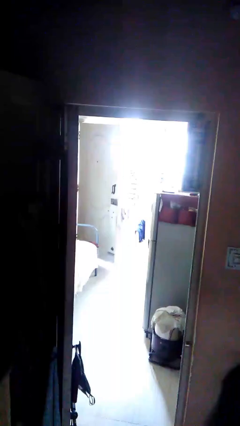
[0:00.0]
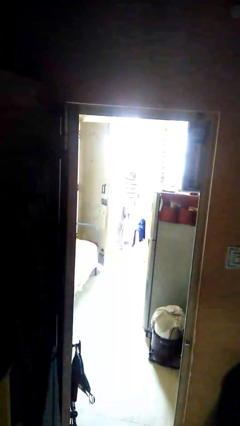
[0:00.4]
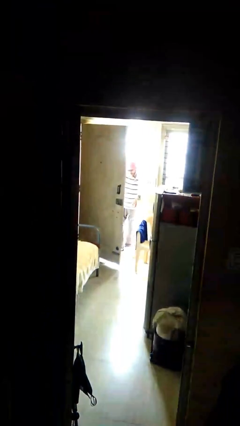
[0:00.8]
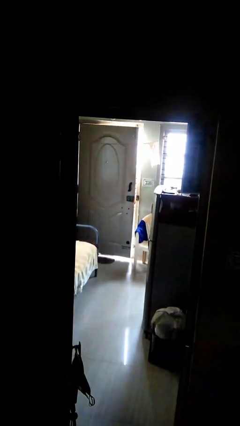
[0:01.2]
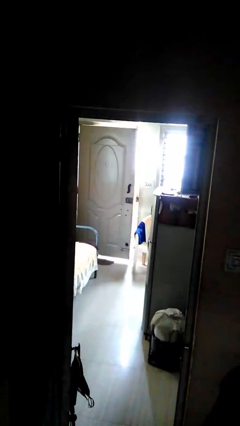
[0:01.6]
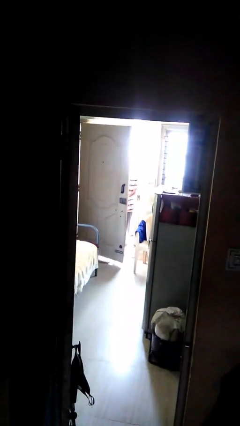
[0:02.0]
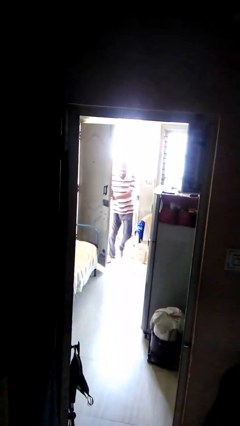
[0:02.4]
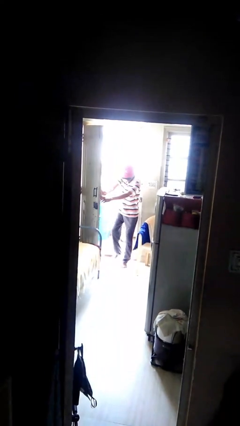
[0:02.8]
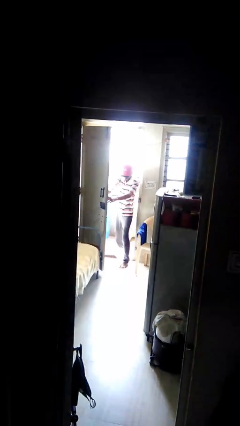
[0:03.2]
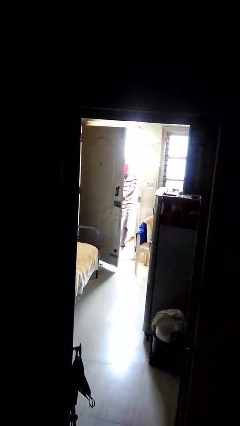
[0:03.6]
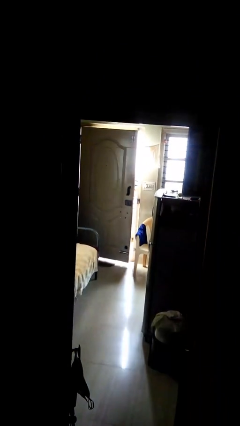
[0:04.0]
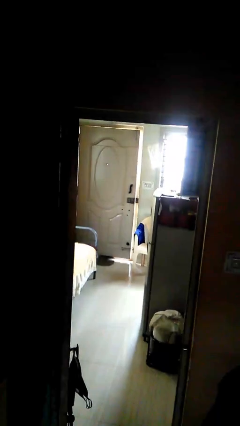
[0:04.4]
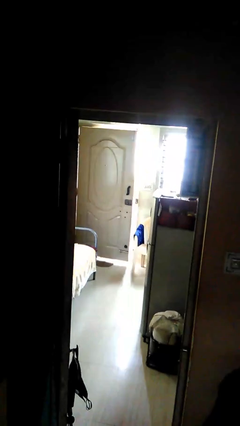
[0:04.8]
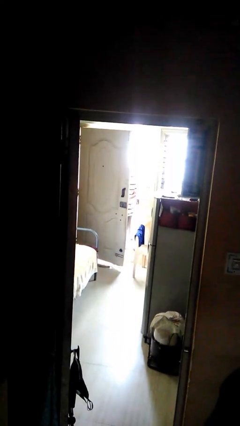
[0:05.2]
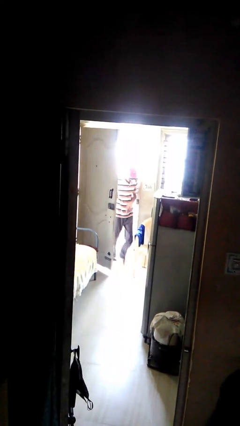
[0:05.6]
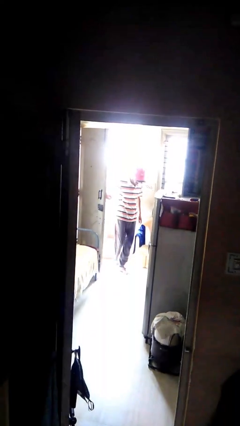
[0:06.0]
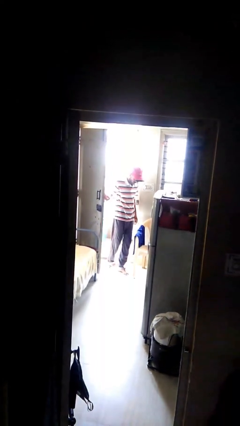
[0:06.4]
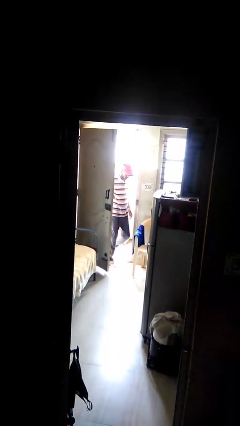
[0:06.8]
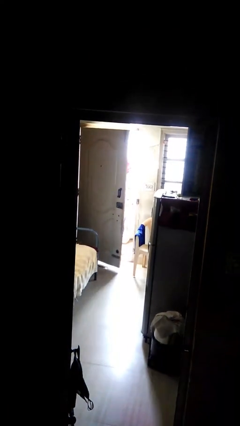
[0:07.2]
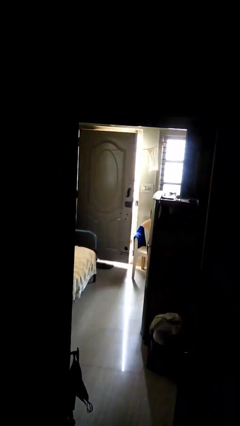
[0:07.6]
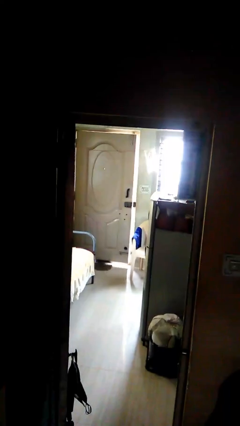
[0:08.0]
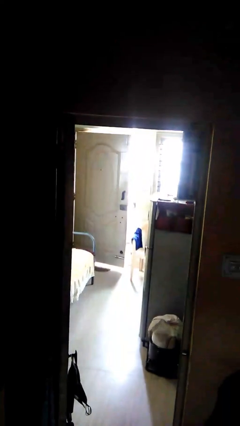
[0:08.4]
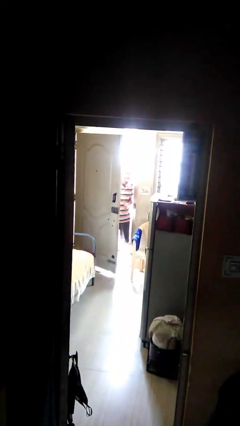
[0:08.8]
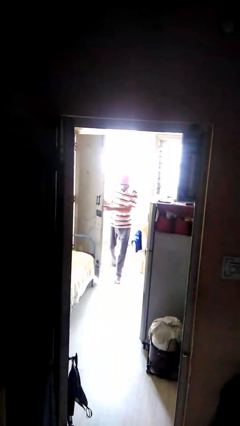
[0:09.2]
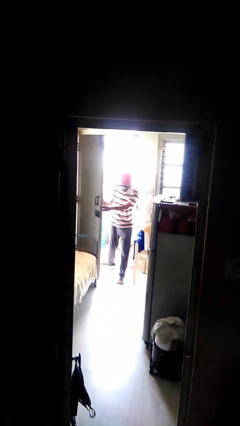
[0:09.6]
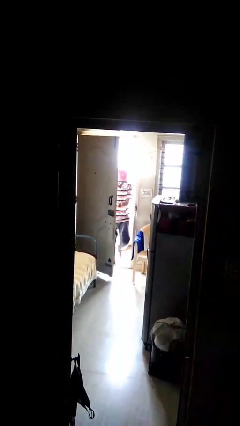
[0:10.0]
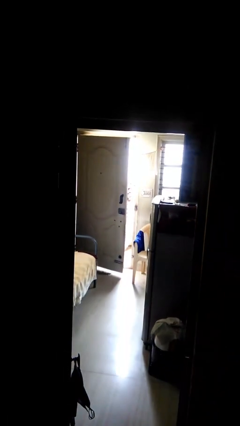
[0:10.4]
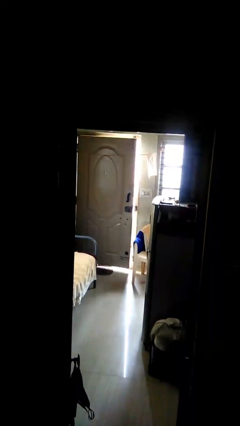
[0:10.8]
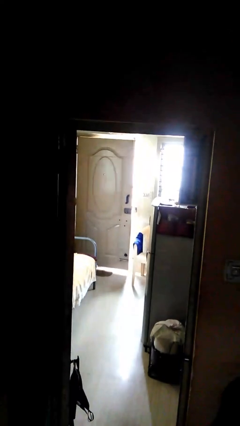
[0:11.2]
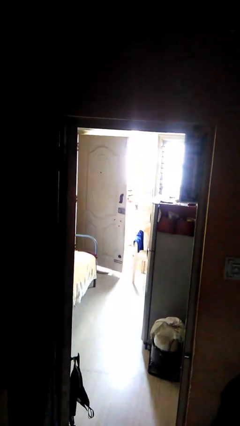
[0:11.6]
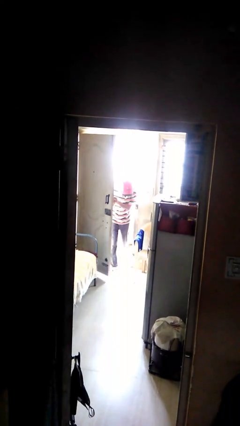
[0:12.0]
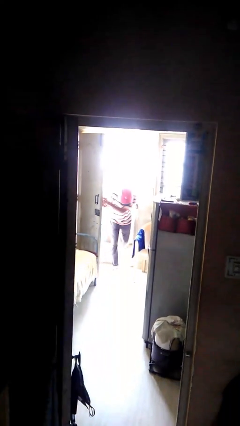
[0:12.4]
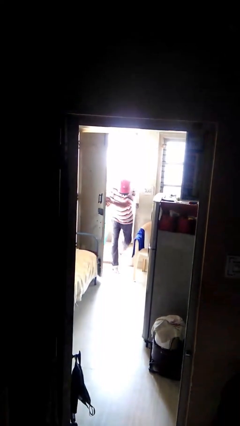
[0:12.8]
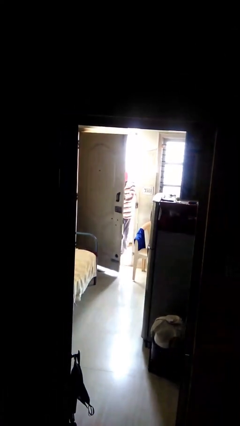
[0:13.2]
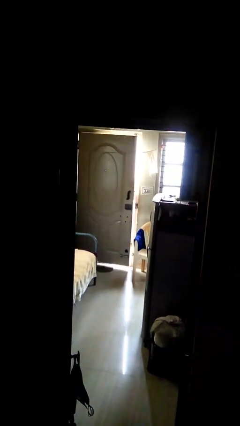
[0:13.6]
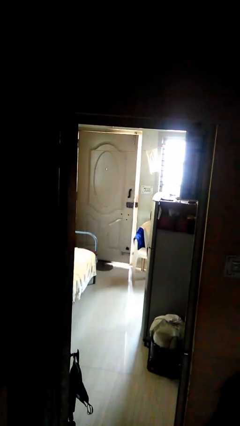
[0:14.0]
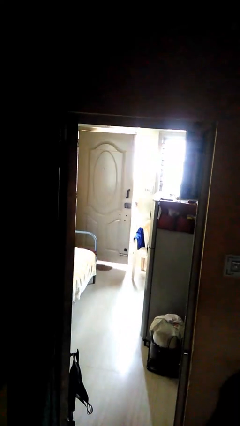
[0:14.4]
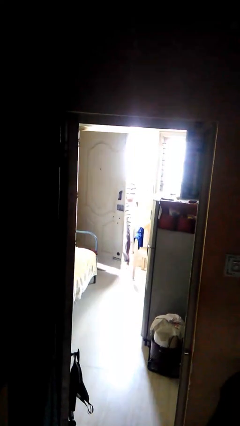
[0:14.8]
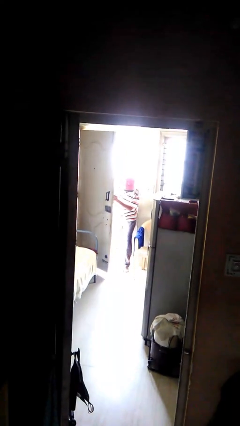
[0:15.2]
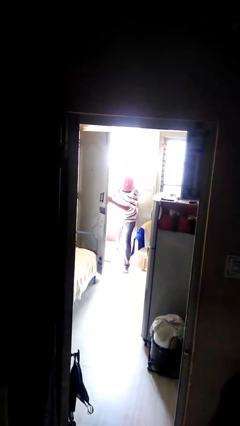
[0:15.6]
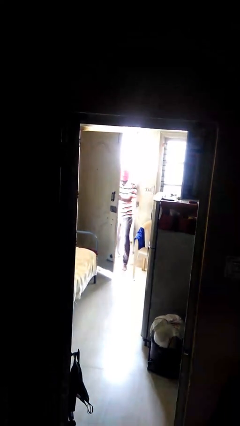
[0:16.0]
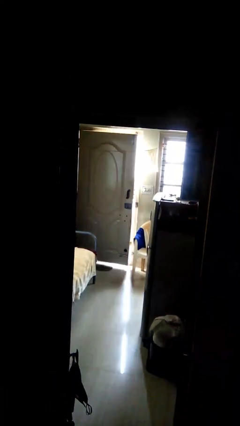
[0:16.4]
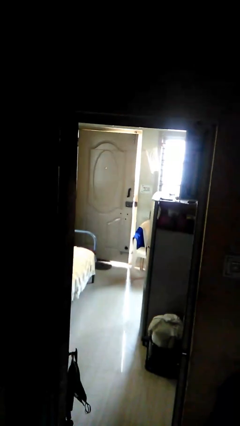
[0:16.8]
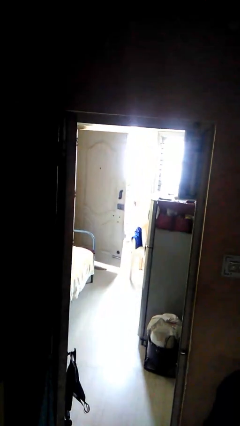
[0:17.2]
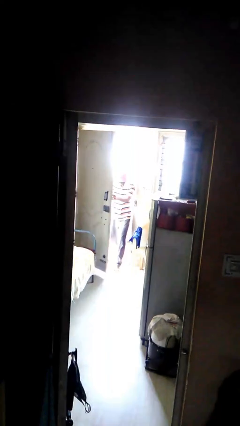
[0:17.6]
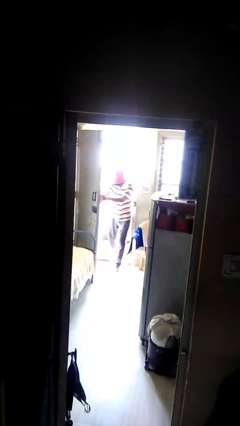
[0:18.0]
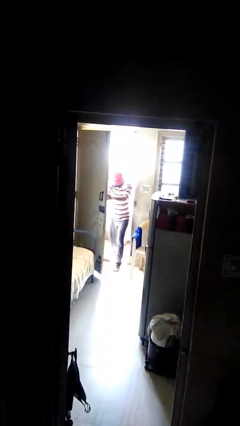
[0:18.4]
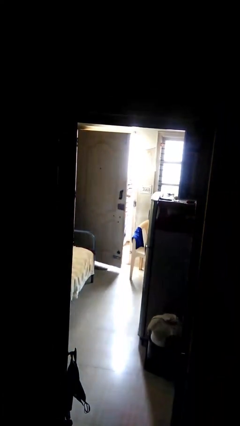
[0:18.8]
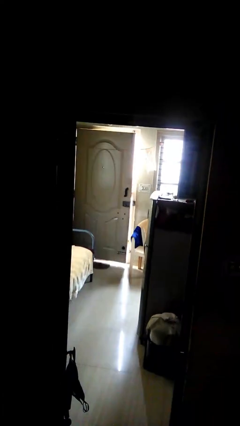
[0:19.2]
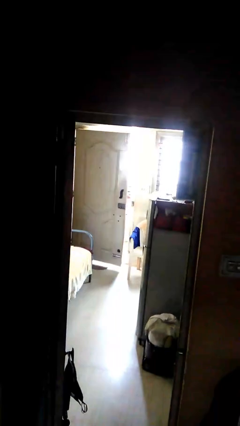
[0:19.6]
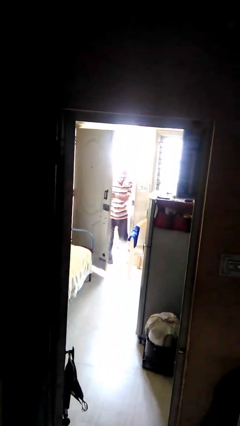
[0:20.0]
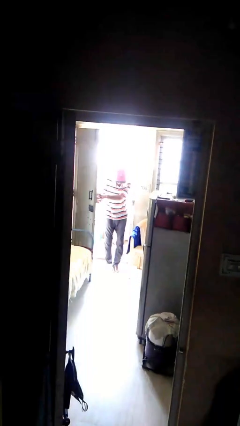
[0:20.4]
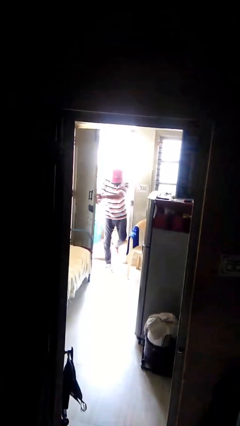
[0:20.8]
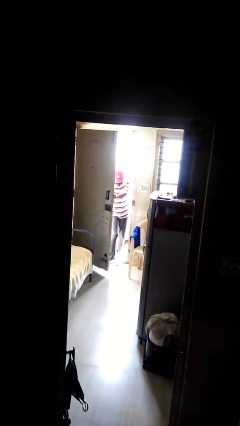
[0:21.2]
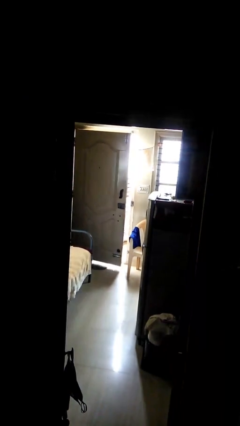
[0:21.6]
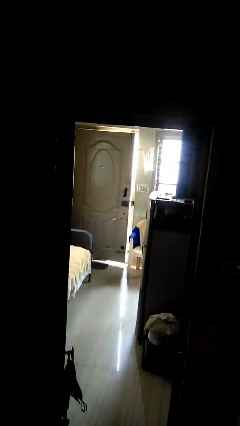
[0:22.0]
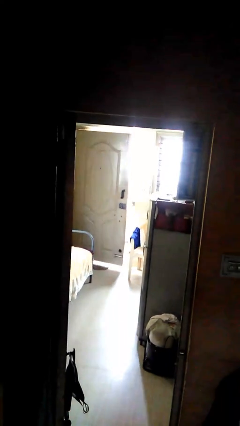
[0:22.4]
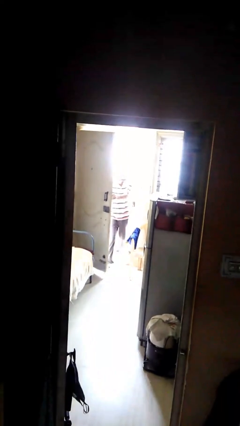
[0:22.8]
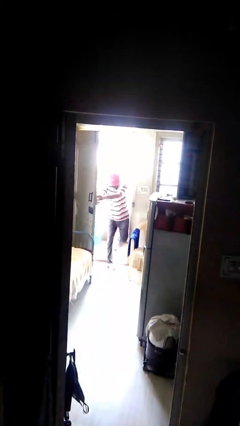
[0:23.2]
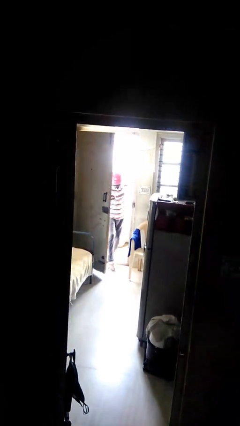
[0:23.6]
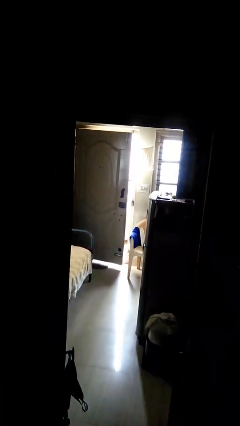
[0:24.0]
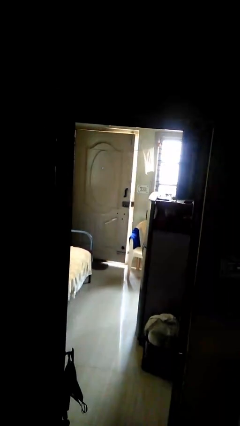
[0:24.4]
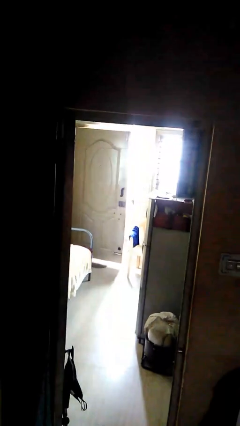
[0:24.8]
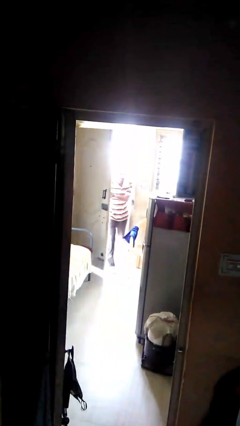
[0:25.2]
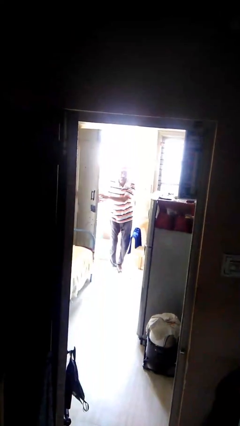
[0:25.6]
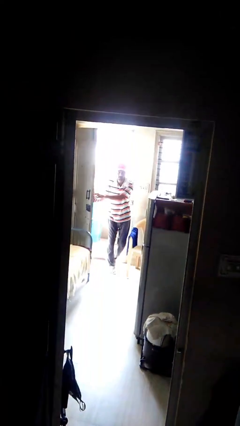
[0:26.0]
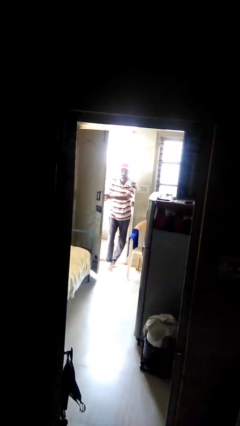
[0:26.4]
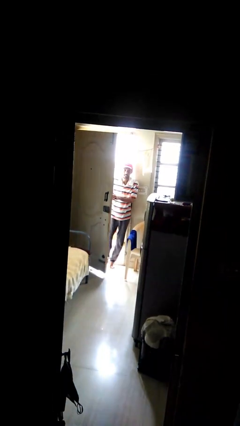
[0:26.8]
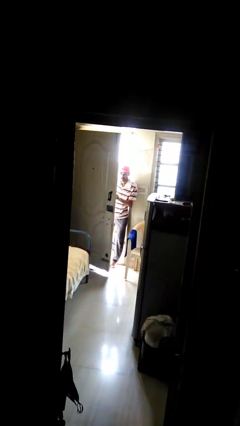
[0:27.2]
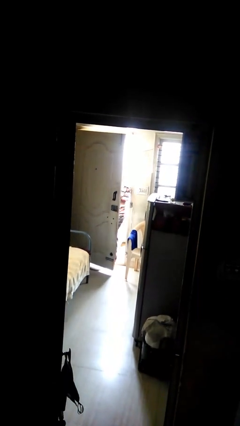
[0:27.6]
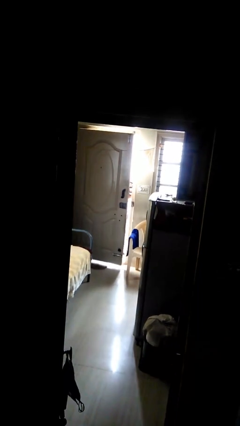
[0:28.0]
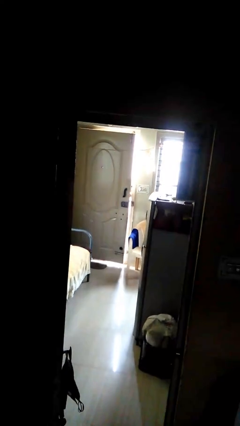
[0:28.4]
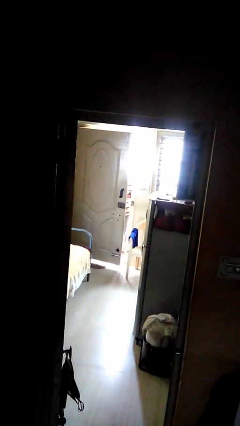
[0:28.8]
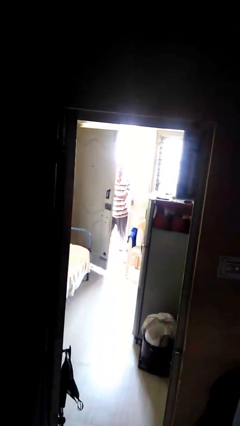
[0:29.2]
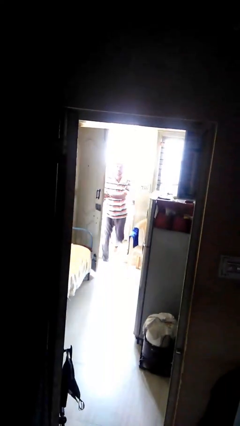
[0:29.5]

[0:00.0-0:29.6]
person opens facility door

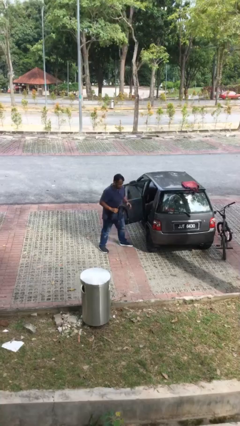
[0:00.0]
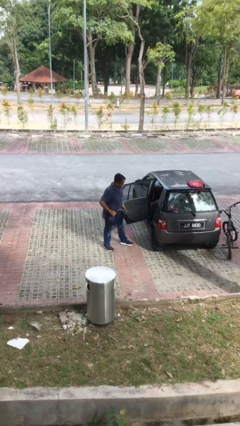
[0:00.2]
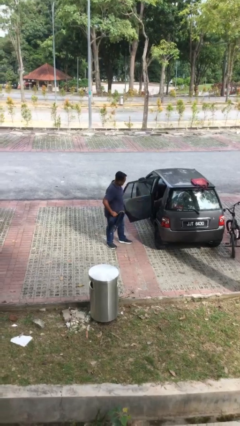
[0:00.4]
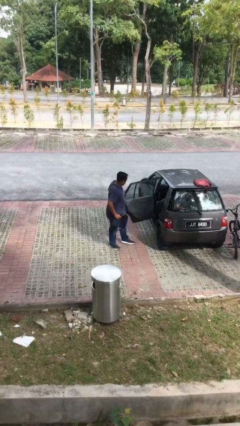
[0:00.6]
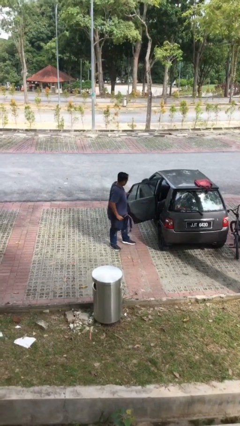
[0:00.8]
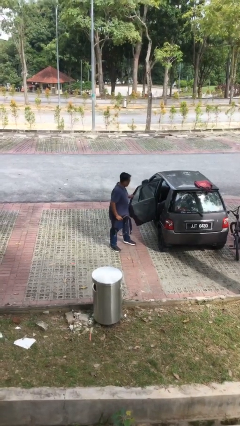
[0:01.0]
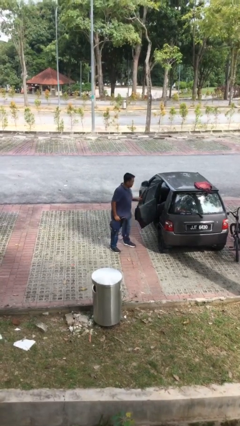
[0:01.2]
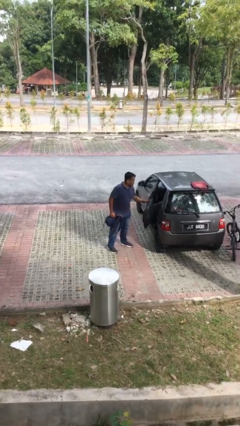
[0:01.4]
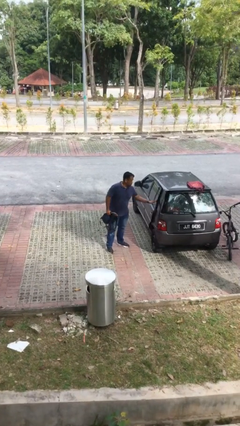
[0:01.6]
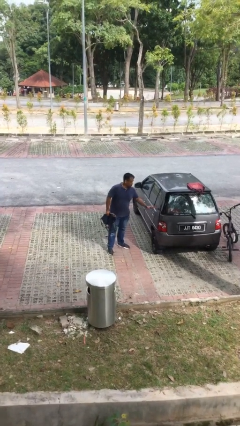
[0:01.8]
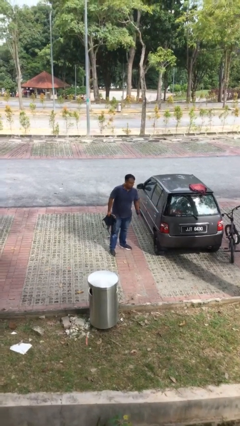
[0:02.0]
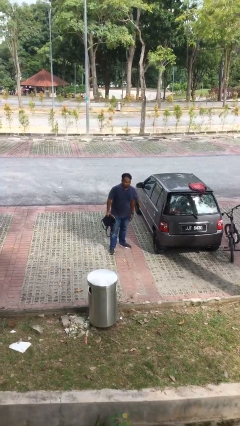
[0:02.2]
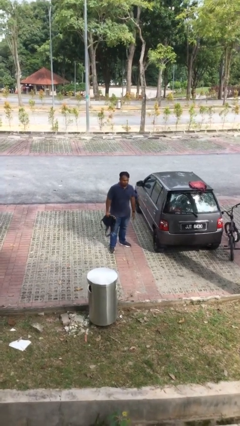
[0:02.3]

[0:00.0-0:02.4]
person closes car door
